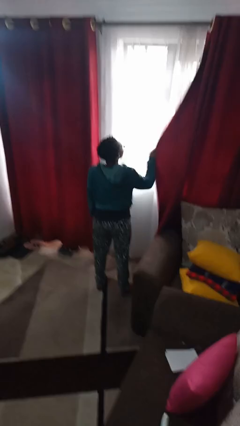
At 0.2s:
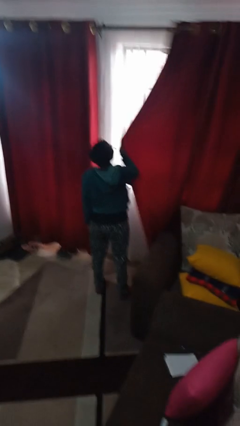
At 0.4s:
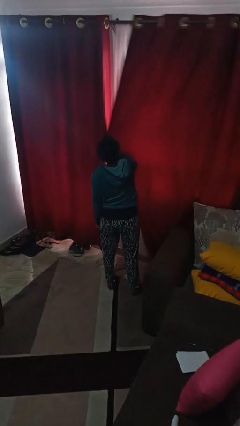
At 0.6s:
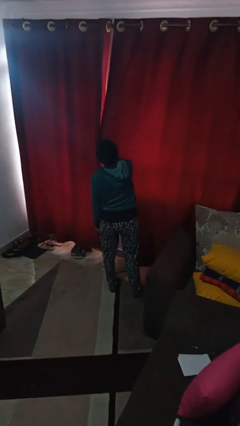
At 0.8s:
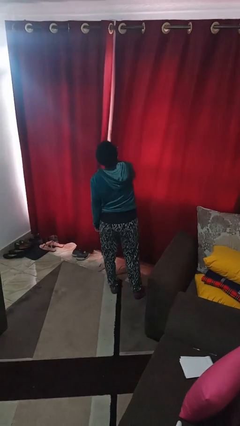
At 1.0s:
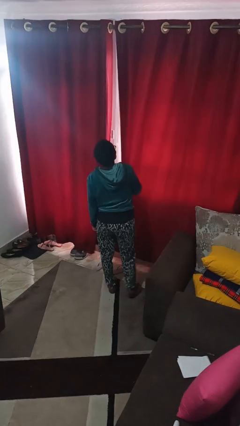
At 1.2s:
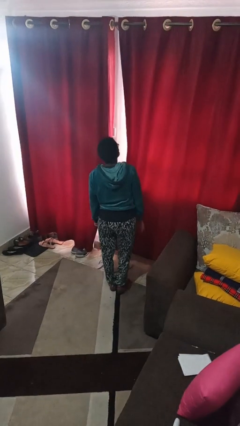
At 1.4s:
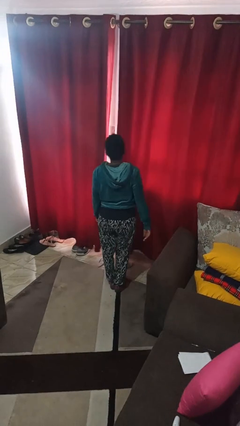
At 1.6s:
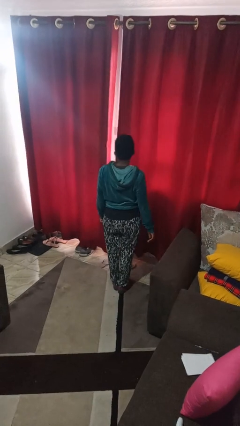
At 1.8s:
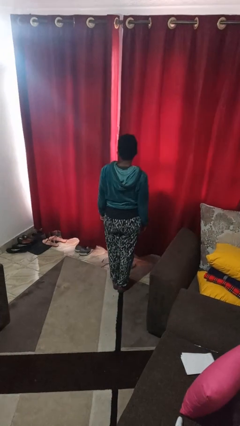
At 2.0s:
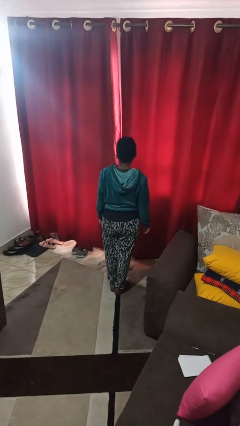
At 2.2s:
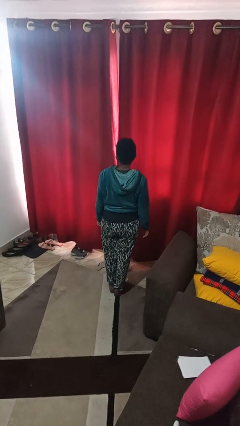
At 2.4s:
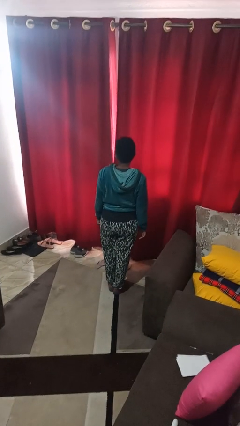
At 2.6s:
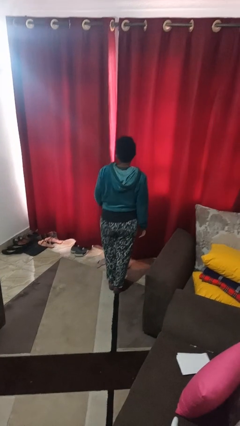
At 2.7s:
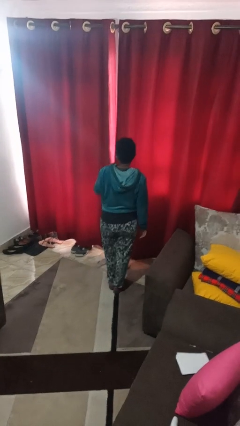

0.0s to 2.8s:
person closes curtains

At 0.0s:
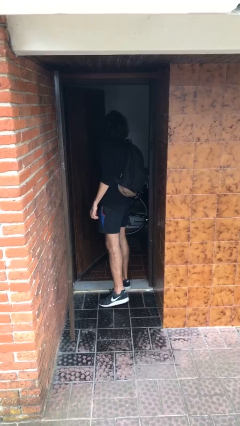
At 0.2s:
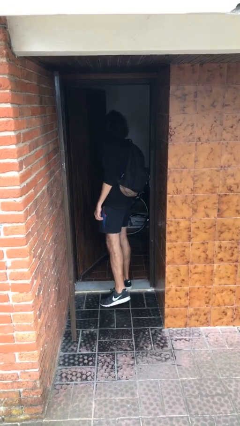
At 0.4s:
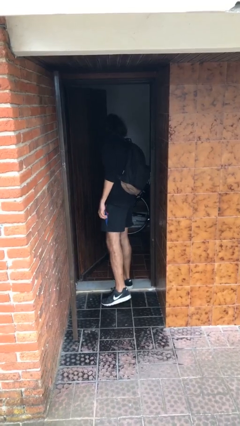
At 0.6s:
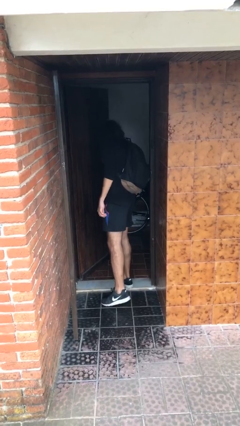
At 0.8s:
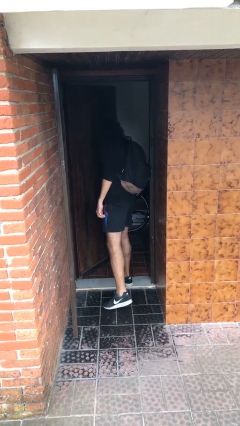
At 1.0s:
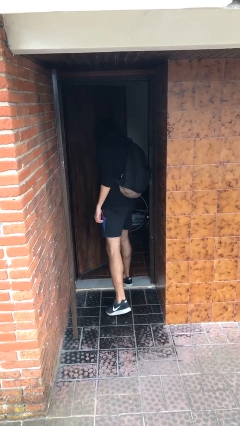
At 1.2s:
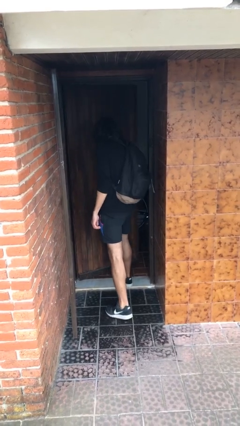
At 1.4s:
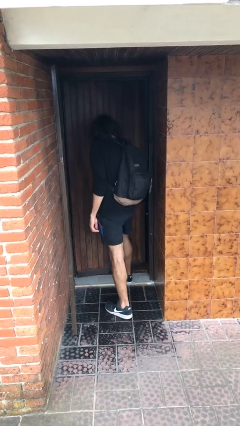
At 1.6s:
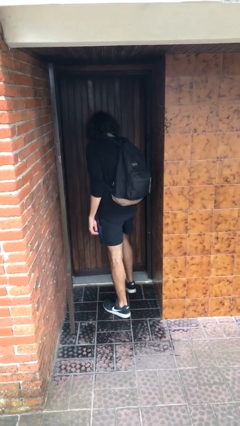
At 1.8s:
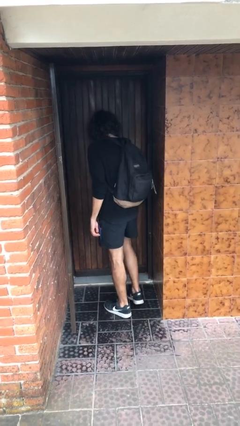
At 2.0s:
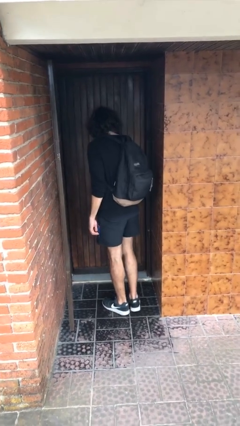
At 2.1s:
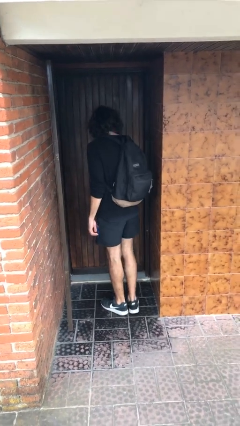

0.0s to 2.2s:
person closes facility door

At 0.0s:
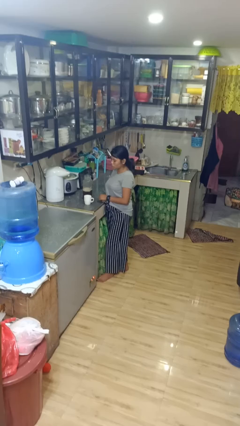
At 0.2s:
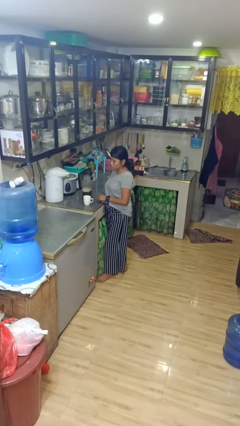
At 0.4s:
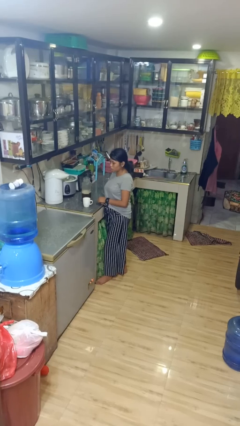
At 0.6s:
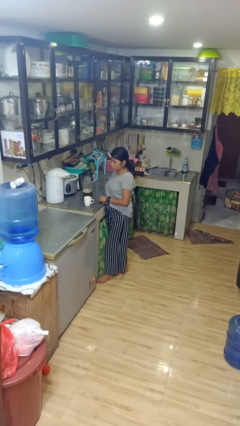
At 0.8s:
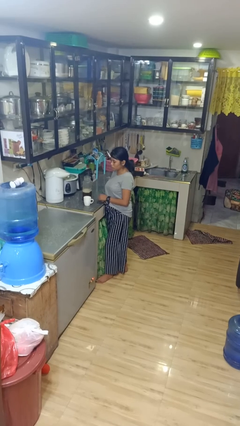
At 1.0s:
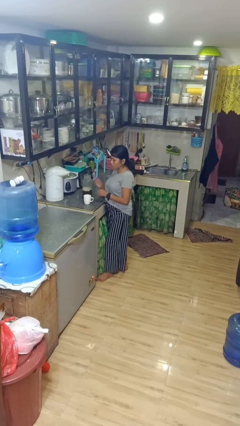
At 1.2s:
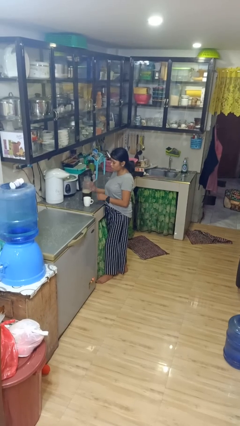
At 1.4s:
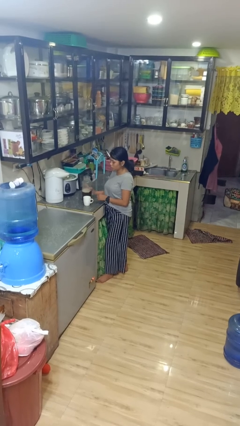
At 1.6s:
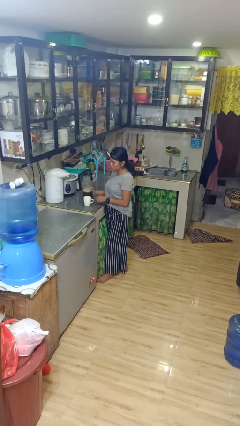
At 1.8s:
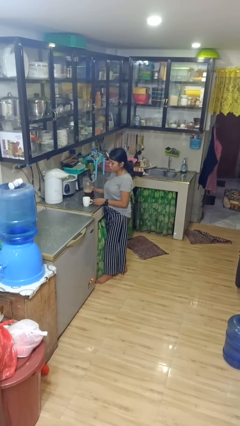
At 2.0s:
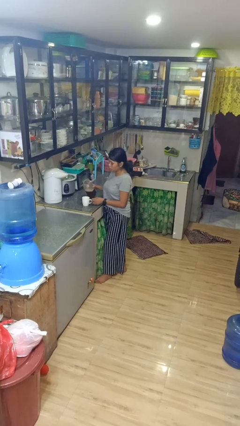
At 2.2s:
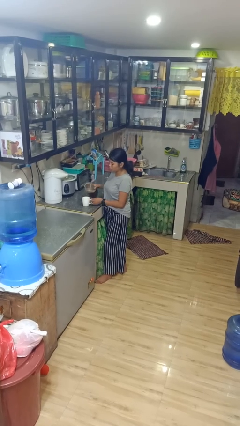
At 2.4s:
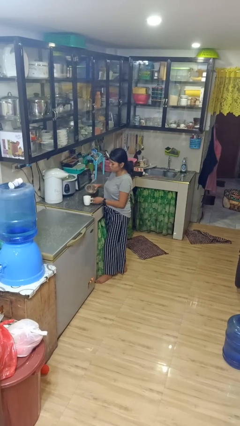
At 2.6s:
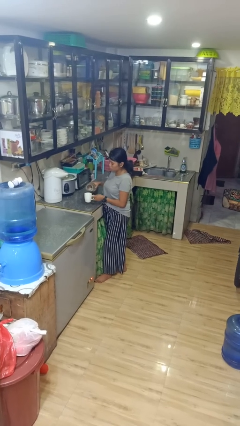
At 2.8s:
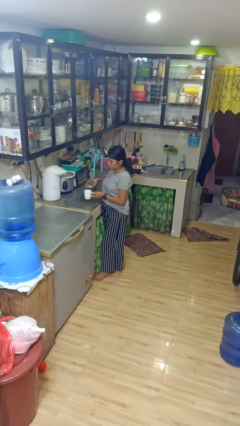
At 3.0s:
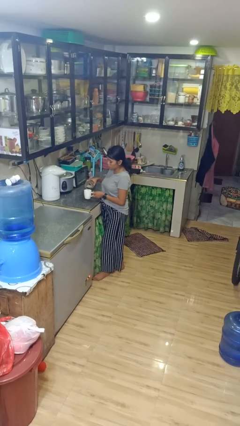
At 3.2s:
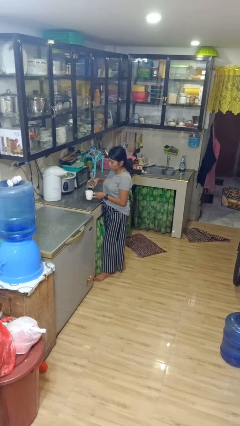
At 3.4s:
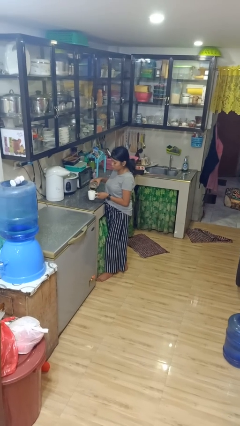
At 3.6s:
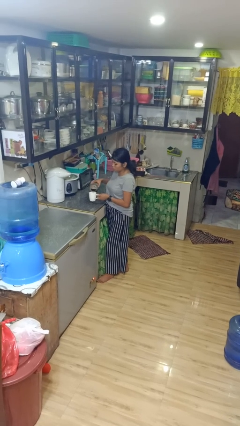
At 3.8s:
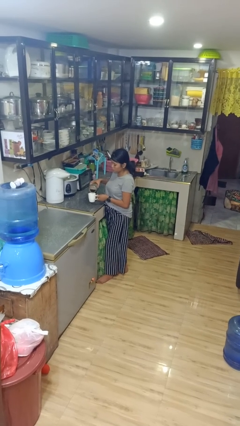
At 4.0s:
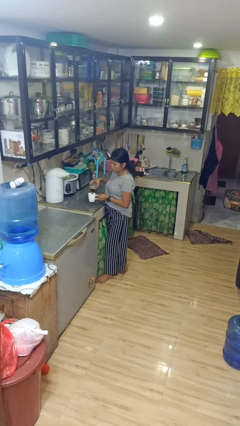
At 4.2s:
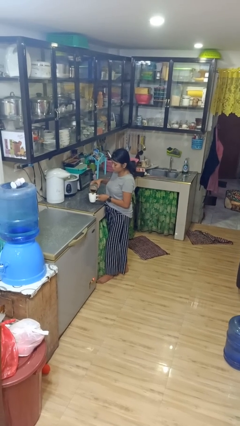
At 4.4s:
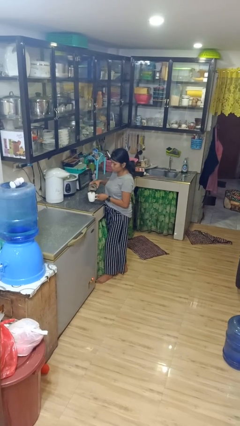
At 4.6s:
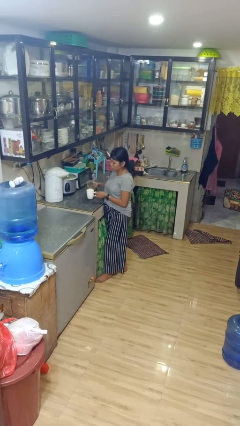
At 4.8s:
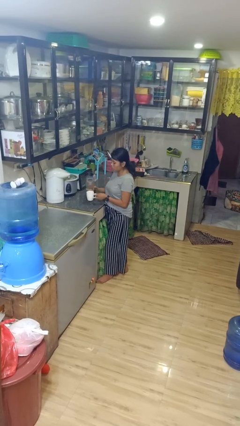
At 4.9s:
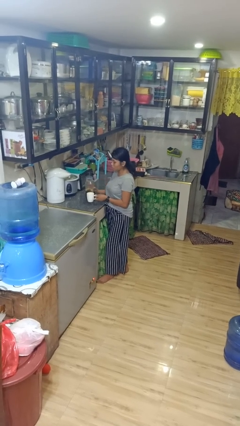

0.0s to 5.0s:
person pours coffee into mug

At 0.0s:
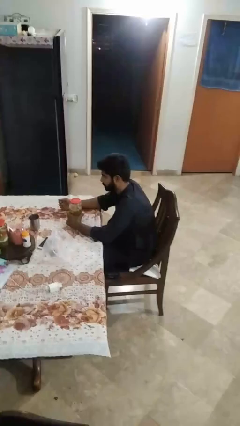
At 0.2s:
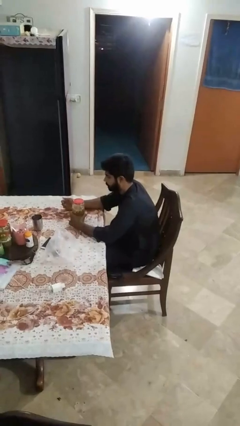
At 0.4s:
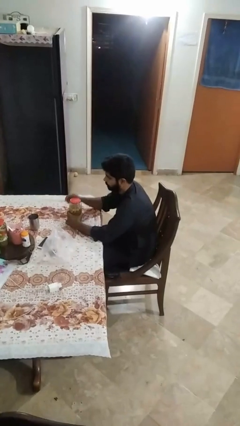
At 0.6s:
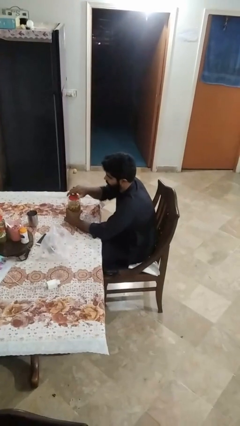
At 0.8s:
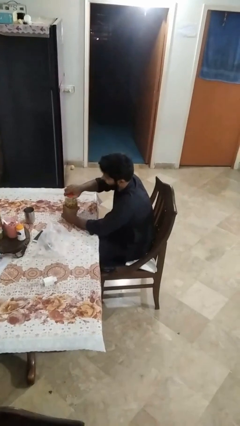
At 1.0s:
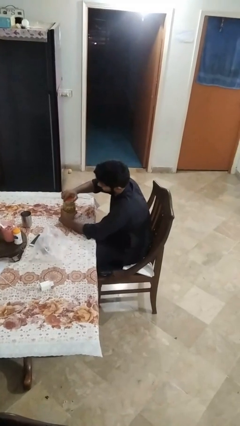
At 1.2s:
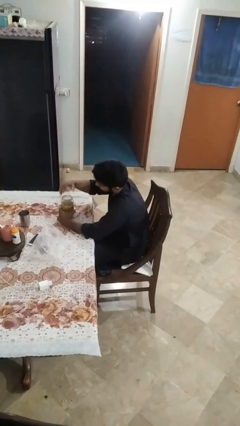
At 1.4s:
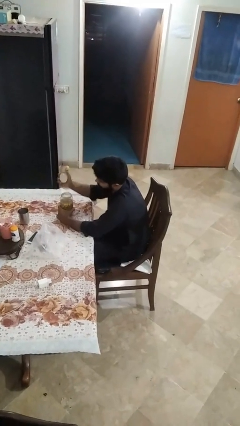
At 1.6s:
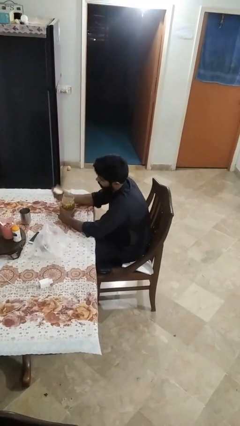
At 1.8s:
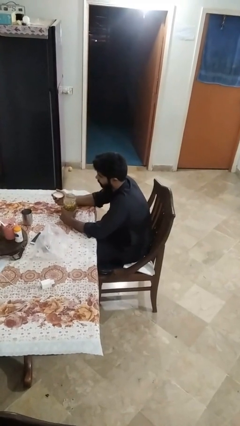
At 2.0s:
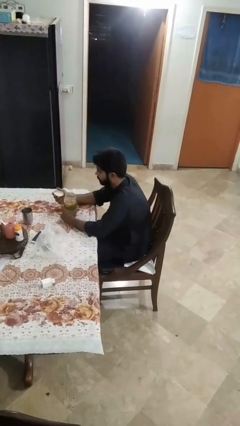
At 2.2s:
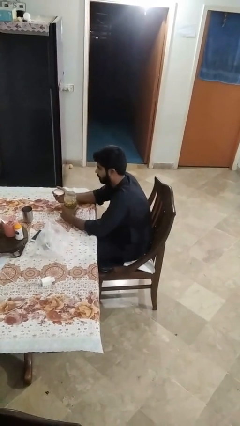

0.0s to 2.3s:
person opens jar

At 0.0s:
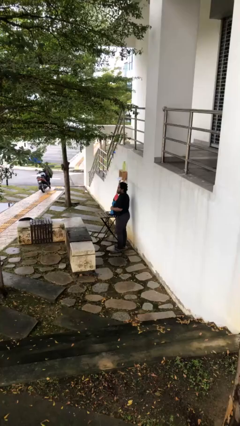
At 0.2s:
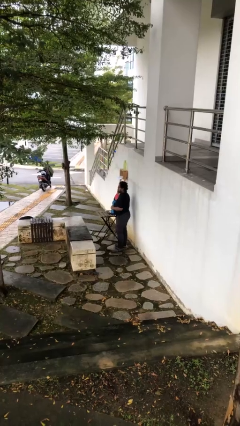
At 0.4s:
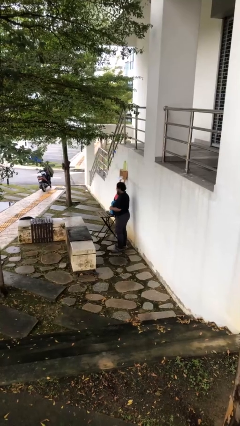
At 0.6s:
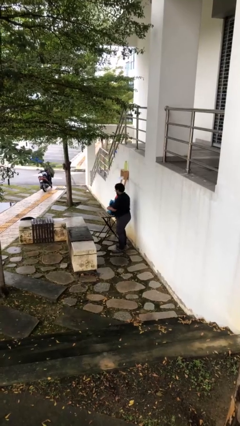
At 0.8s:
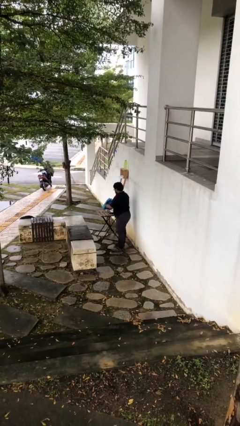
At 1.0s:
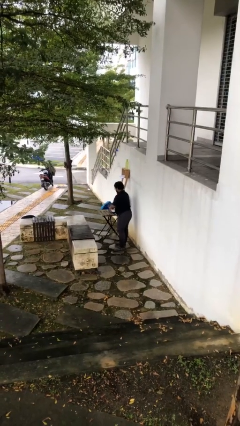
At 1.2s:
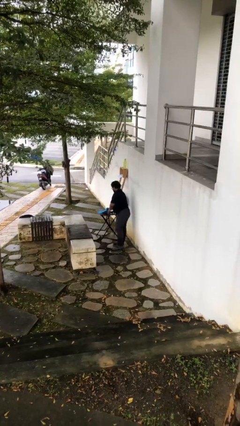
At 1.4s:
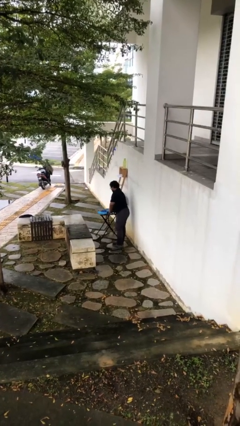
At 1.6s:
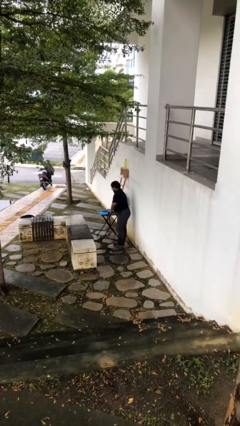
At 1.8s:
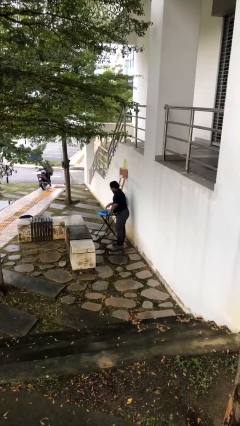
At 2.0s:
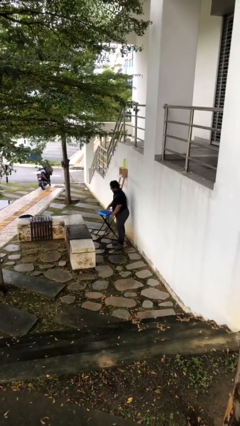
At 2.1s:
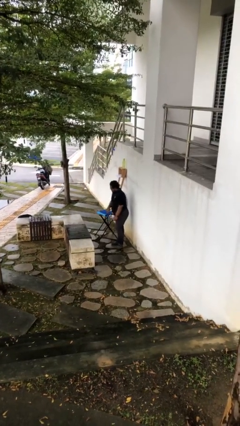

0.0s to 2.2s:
person puts down object on table

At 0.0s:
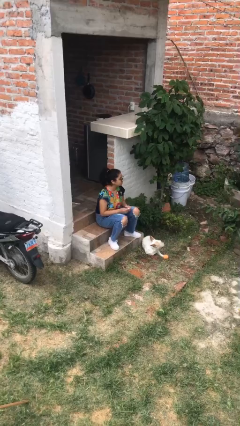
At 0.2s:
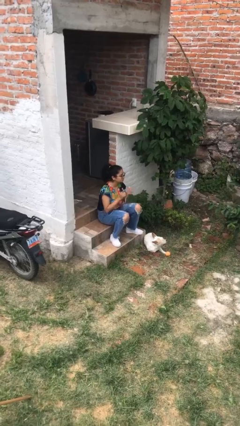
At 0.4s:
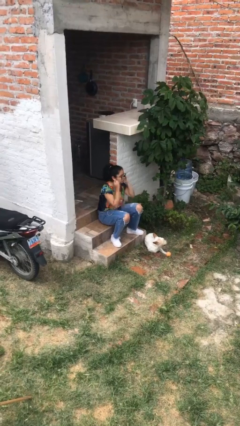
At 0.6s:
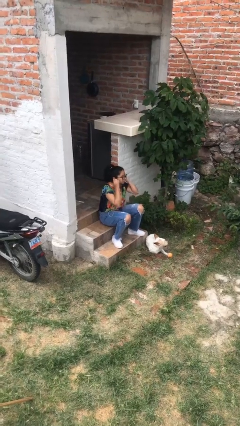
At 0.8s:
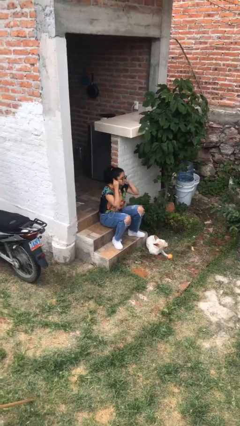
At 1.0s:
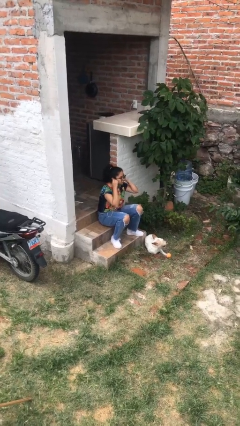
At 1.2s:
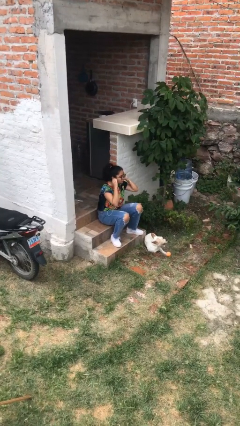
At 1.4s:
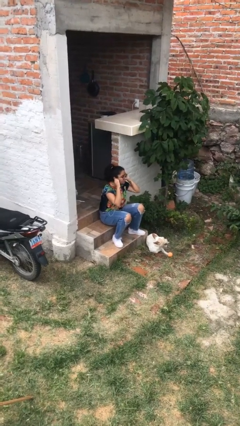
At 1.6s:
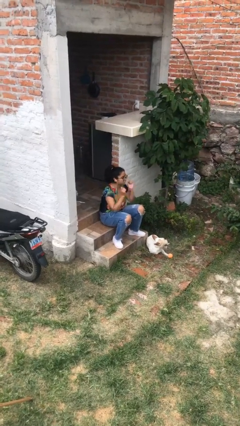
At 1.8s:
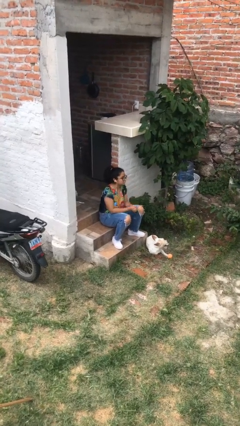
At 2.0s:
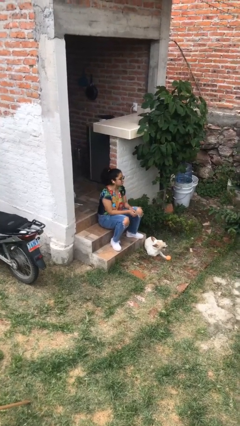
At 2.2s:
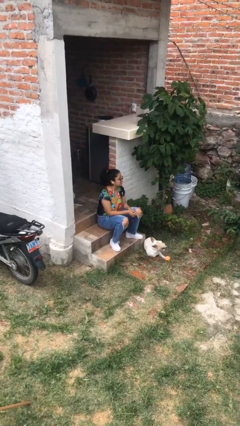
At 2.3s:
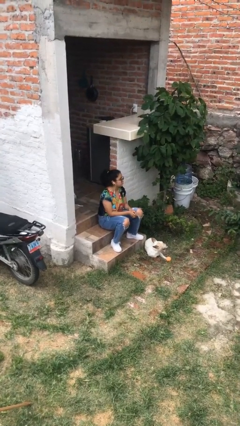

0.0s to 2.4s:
person puts on headphones

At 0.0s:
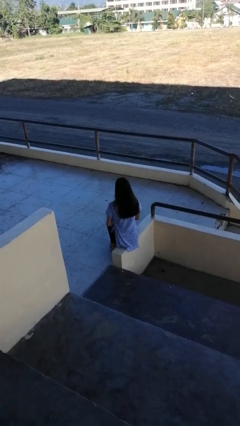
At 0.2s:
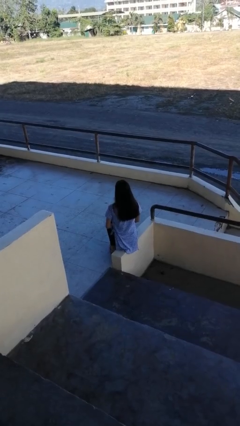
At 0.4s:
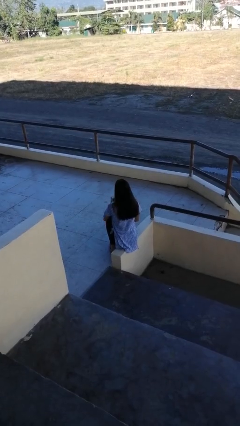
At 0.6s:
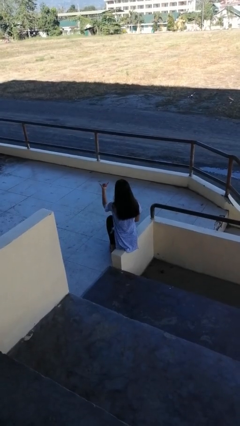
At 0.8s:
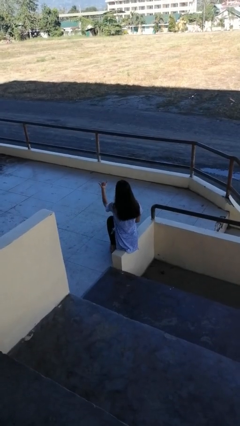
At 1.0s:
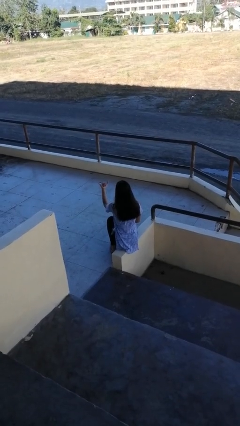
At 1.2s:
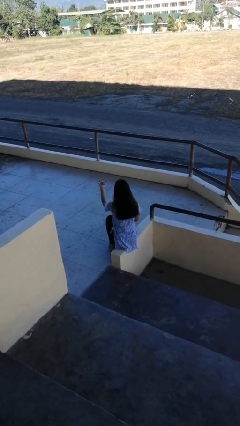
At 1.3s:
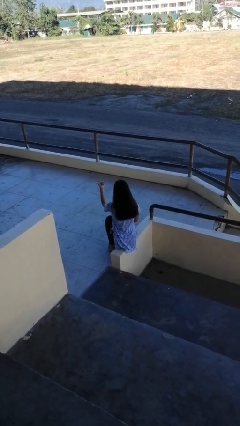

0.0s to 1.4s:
person gestures hang loose
